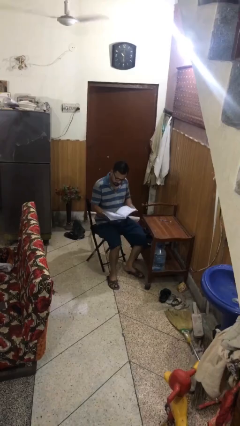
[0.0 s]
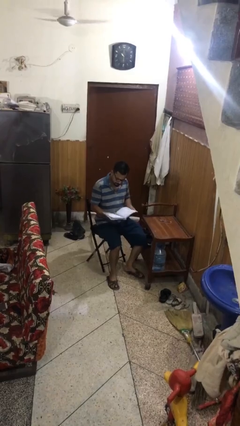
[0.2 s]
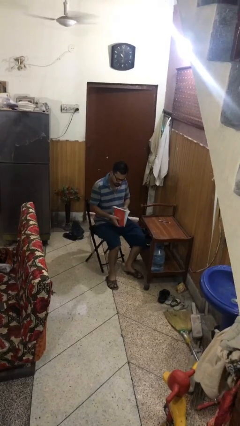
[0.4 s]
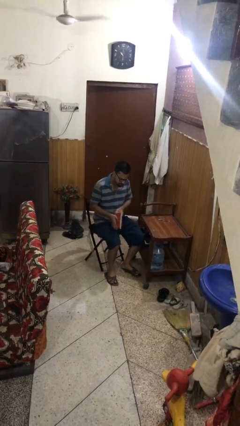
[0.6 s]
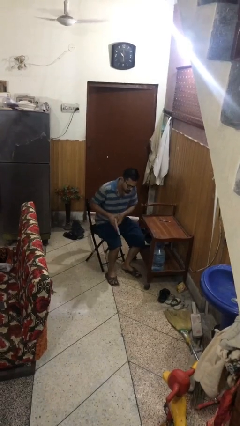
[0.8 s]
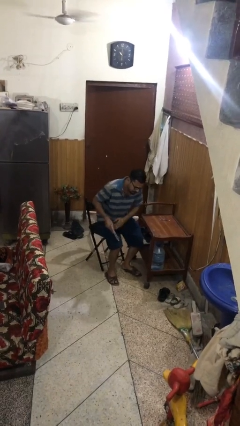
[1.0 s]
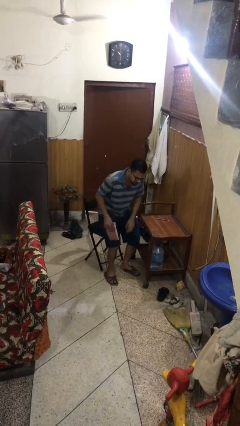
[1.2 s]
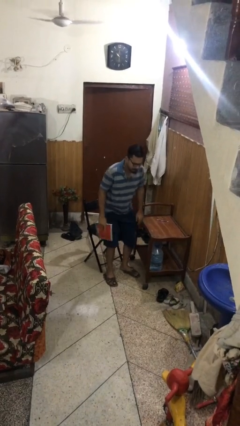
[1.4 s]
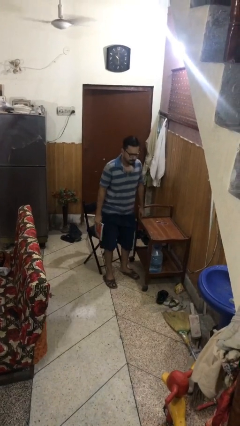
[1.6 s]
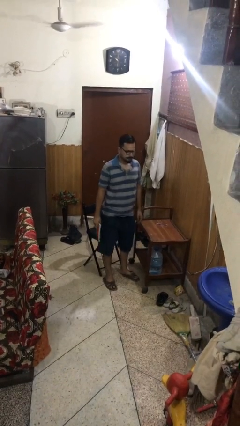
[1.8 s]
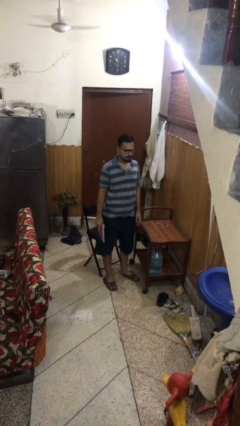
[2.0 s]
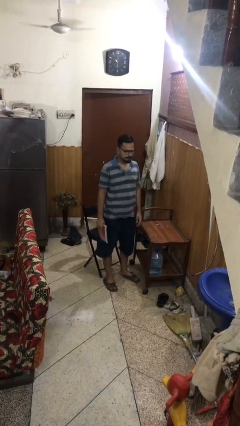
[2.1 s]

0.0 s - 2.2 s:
person stands up

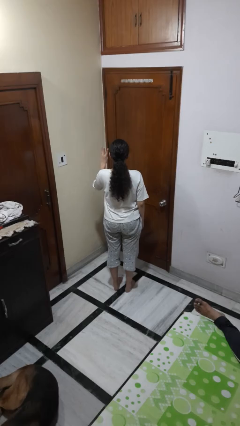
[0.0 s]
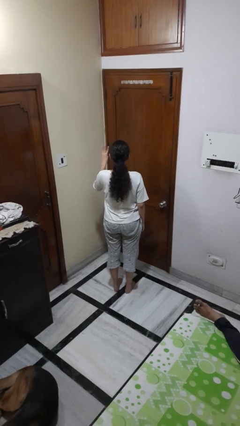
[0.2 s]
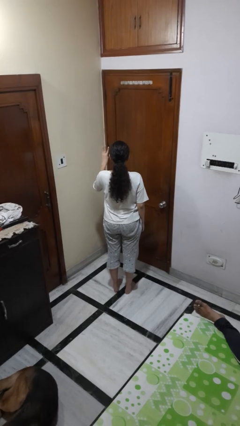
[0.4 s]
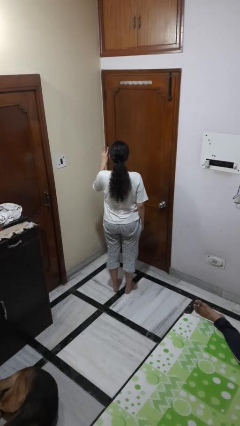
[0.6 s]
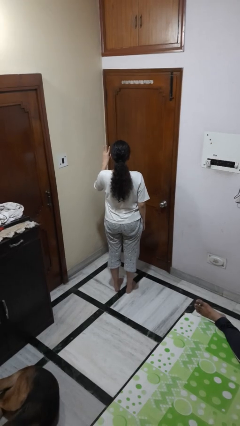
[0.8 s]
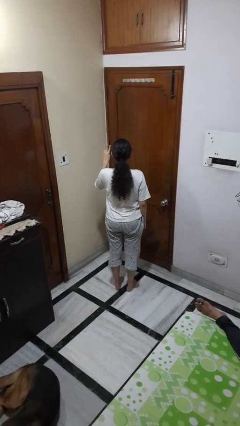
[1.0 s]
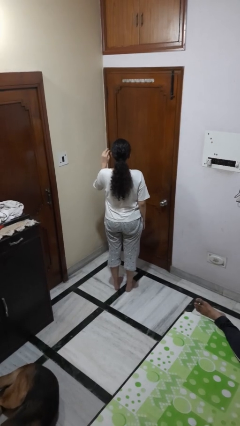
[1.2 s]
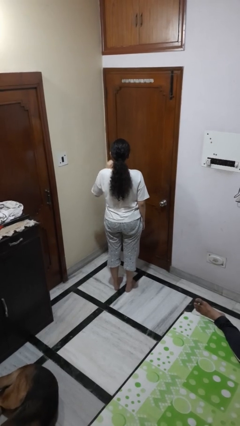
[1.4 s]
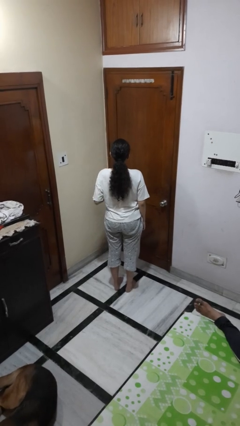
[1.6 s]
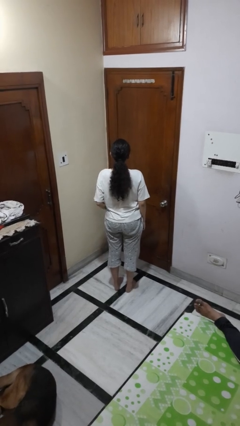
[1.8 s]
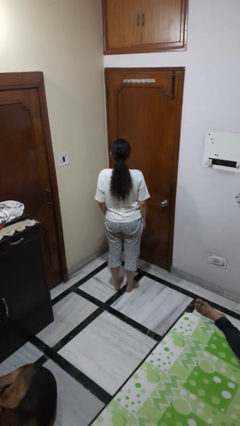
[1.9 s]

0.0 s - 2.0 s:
person gestures number three

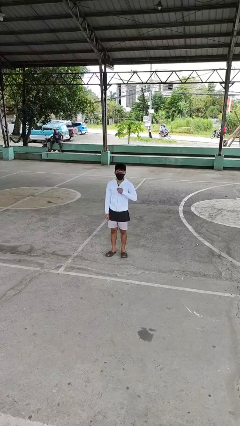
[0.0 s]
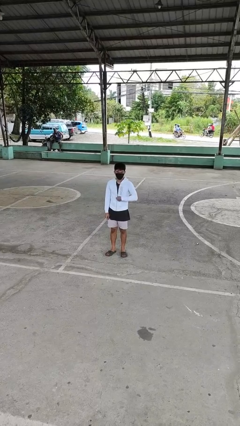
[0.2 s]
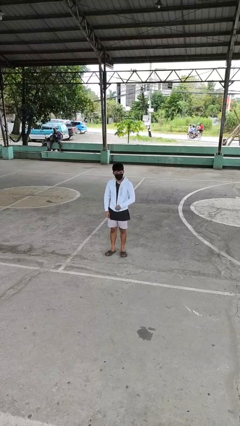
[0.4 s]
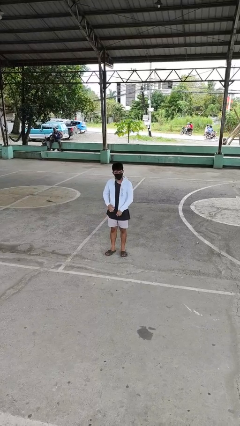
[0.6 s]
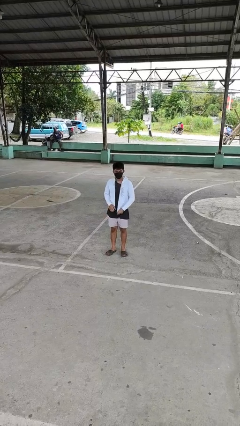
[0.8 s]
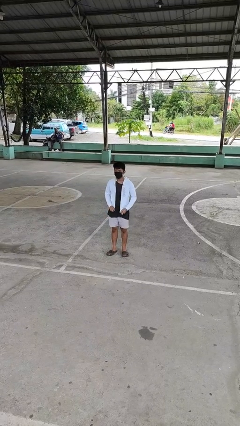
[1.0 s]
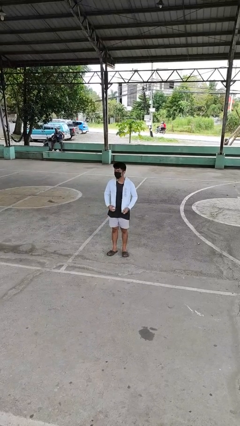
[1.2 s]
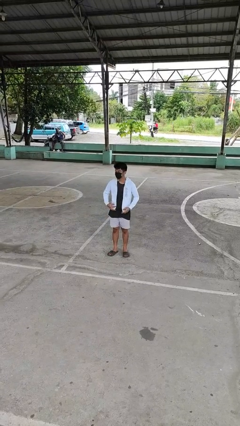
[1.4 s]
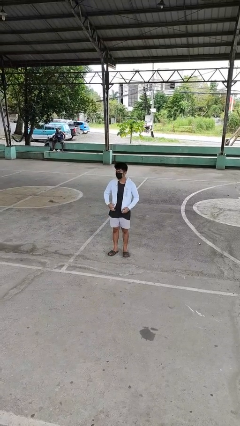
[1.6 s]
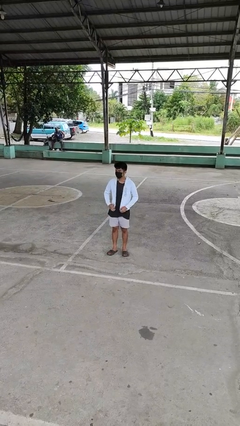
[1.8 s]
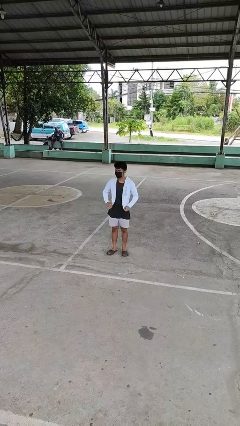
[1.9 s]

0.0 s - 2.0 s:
person unzips jacket

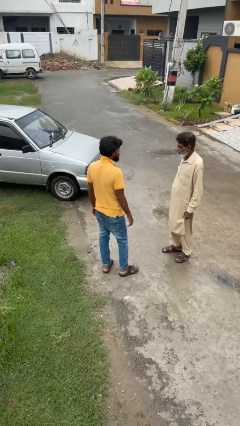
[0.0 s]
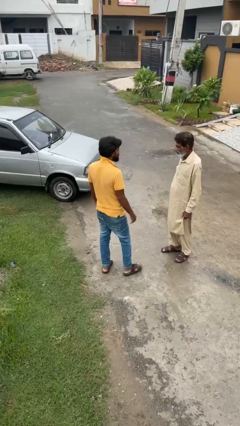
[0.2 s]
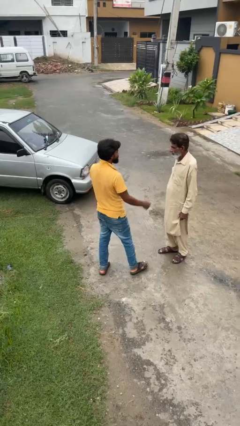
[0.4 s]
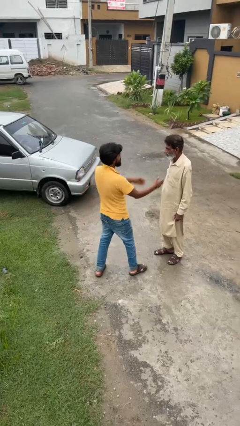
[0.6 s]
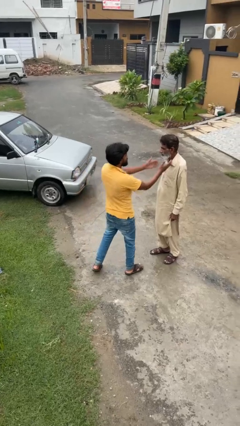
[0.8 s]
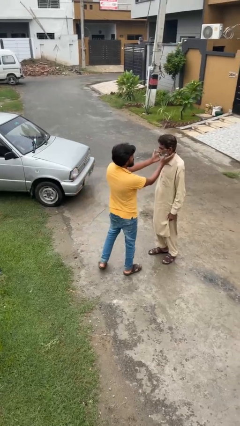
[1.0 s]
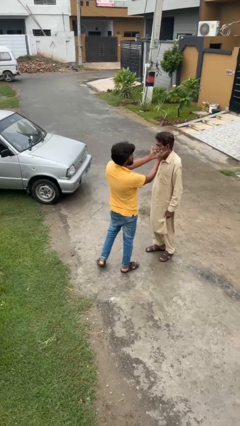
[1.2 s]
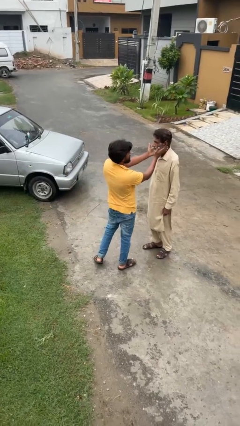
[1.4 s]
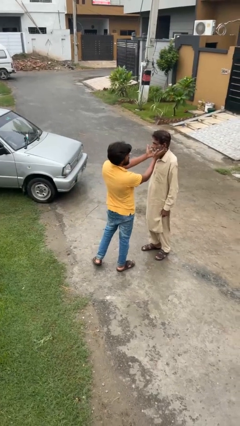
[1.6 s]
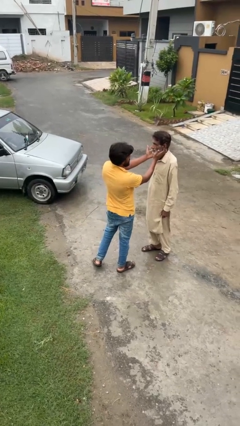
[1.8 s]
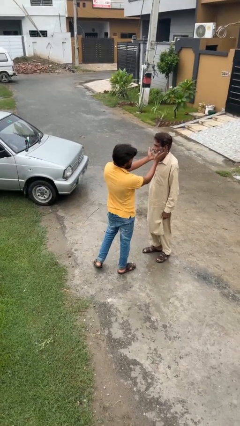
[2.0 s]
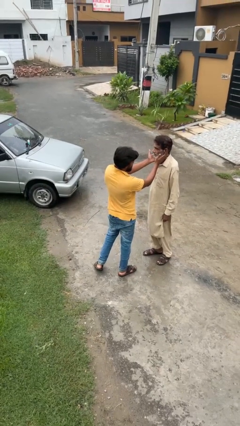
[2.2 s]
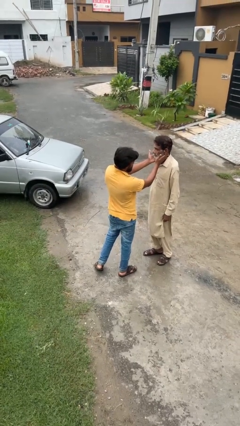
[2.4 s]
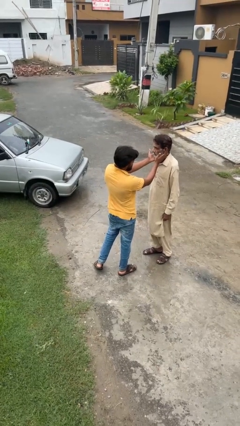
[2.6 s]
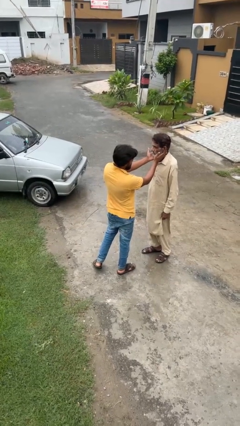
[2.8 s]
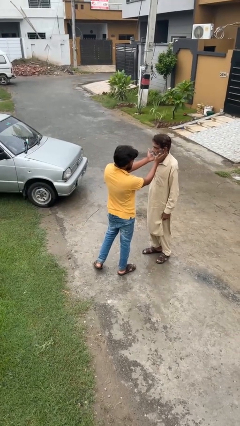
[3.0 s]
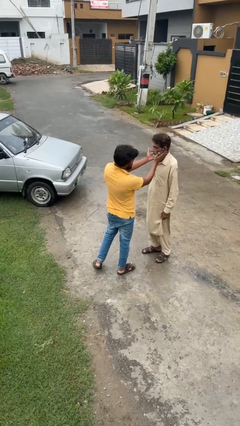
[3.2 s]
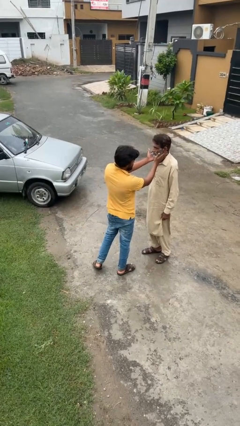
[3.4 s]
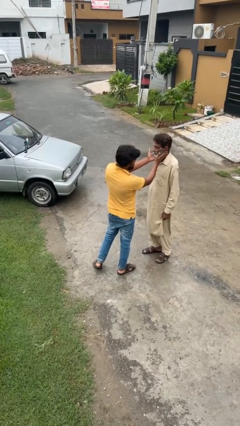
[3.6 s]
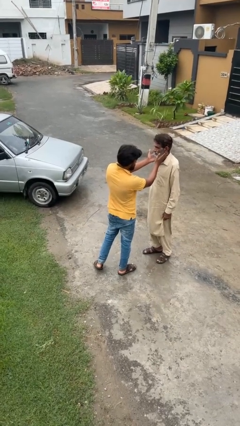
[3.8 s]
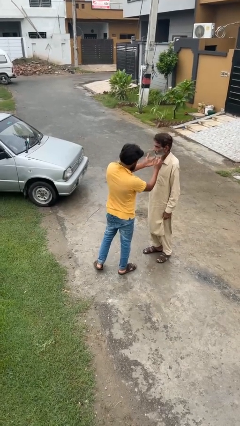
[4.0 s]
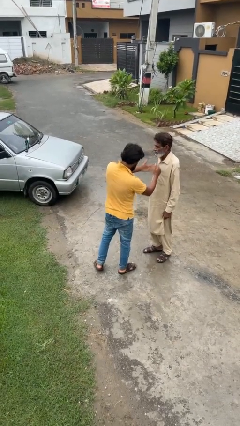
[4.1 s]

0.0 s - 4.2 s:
person touches face of person

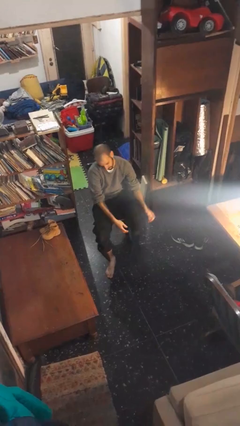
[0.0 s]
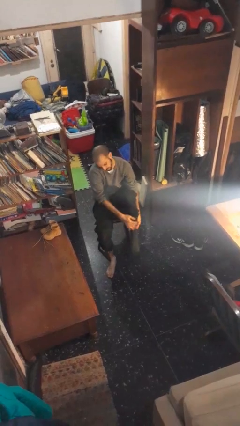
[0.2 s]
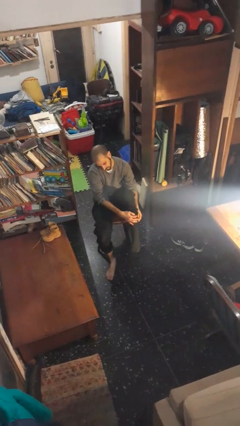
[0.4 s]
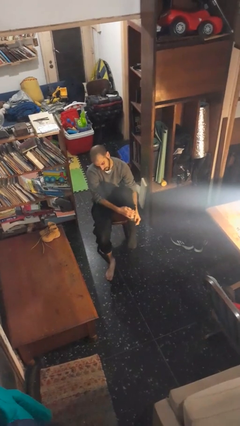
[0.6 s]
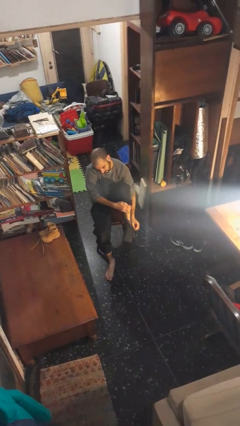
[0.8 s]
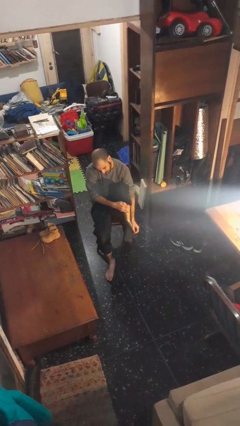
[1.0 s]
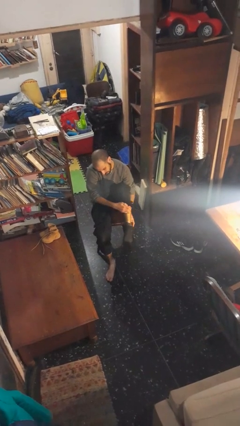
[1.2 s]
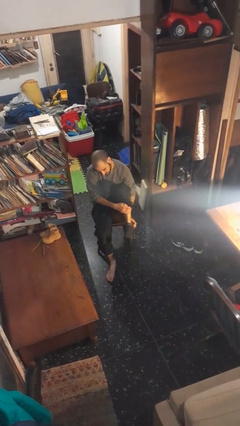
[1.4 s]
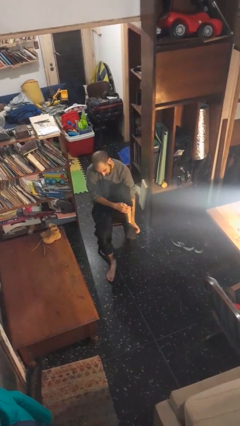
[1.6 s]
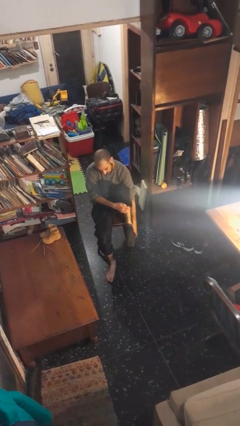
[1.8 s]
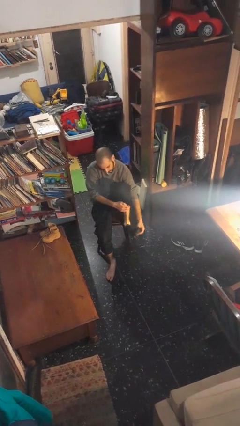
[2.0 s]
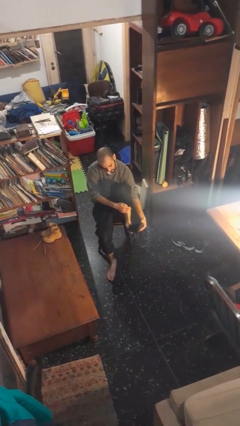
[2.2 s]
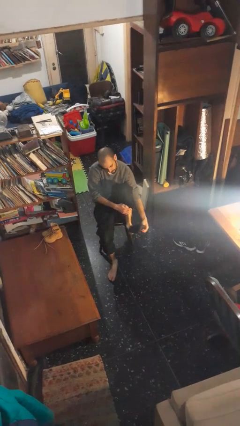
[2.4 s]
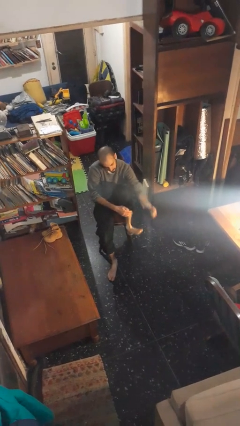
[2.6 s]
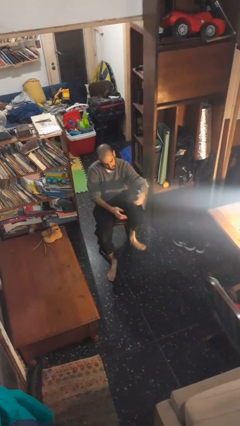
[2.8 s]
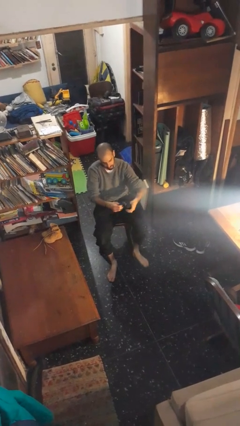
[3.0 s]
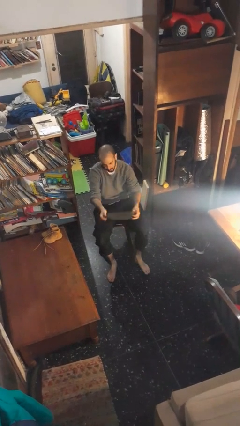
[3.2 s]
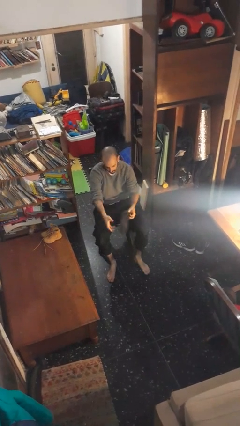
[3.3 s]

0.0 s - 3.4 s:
person takes off socks

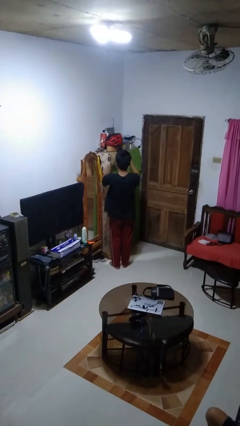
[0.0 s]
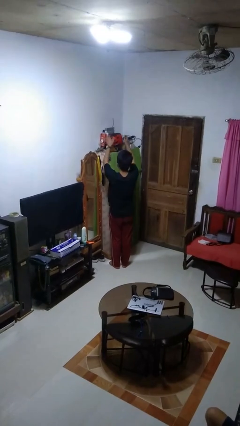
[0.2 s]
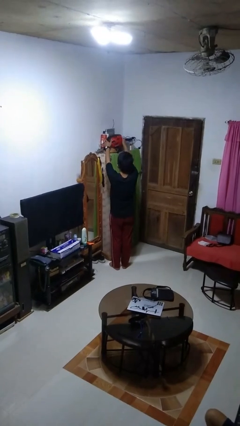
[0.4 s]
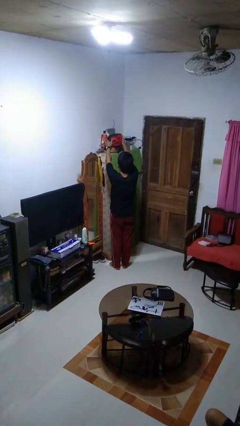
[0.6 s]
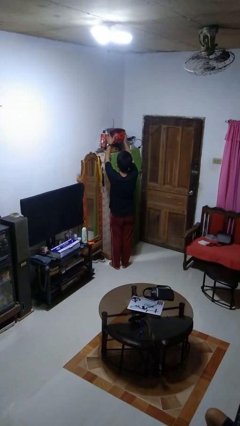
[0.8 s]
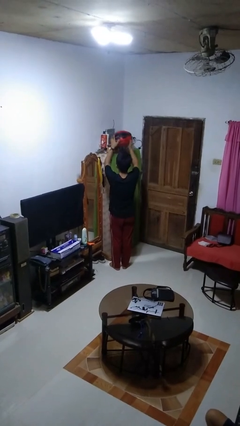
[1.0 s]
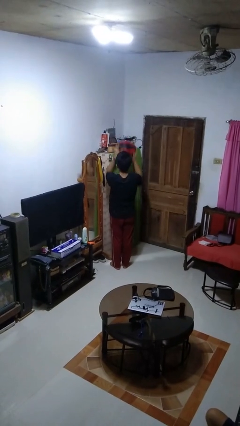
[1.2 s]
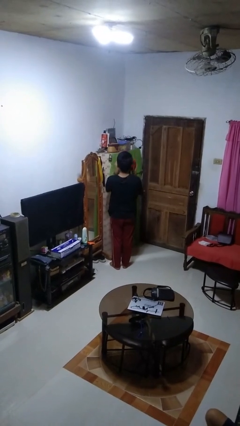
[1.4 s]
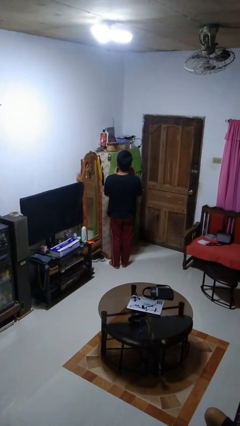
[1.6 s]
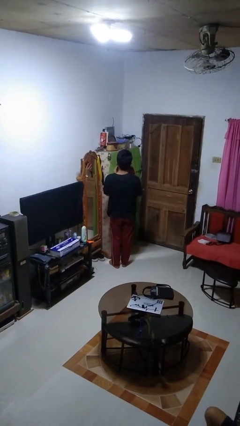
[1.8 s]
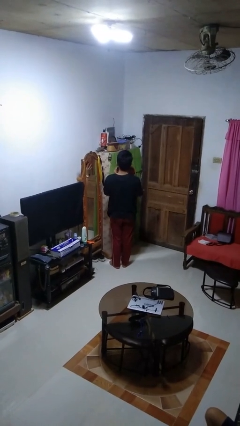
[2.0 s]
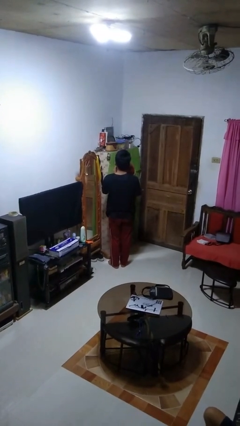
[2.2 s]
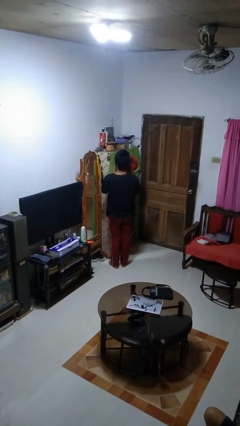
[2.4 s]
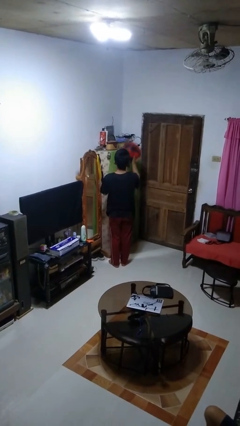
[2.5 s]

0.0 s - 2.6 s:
person picks up object from shelf

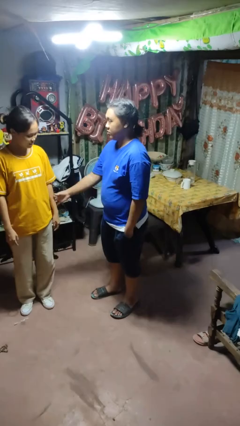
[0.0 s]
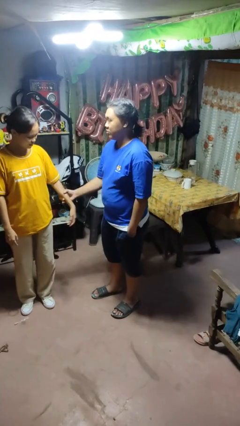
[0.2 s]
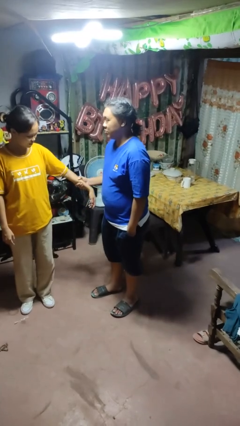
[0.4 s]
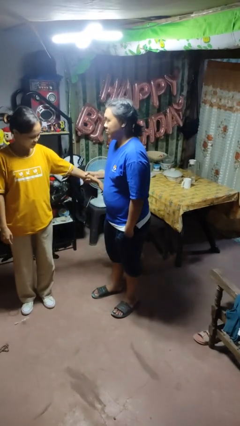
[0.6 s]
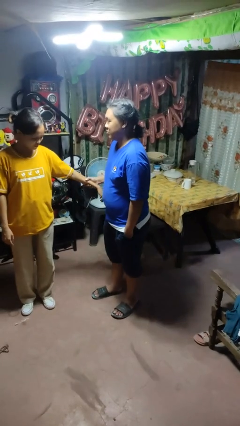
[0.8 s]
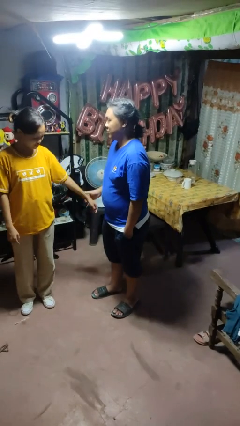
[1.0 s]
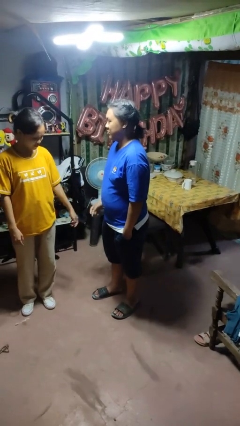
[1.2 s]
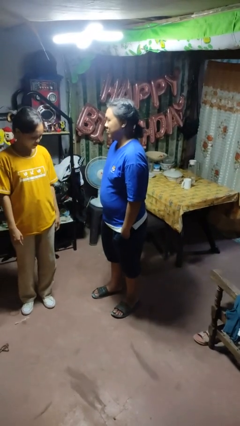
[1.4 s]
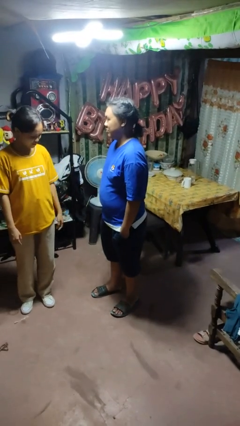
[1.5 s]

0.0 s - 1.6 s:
person grabs person by forearm
